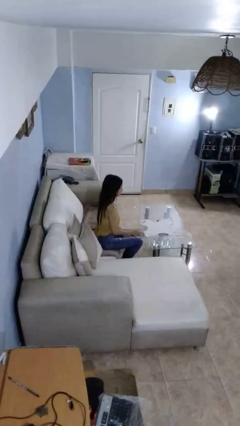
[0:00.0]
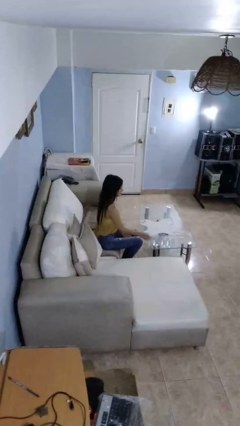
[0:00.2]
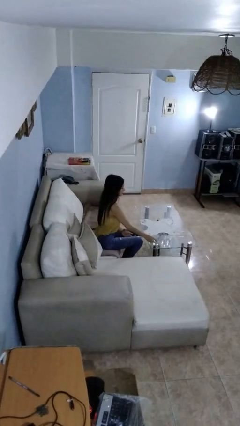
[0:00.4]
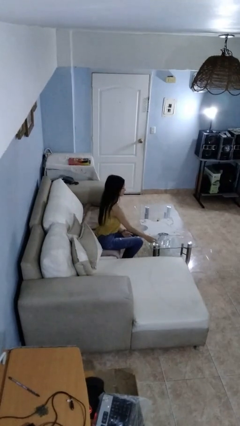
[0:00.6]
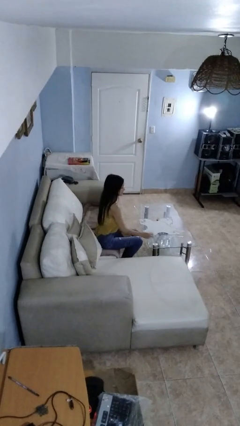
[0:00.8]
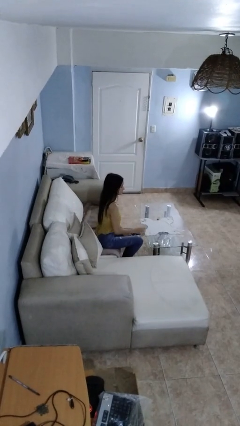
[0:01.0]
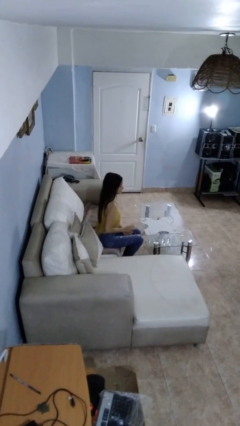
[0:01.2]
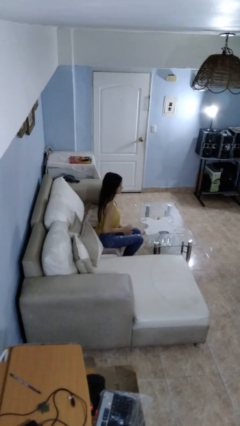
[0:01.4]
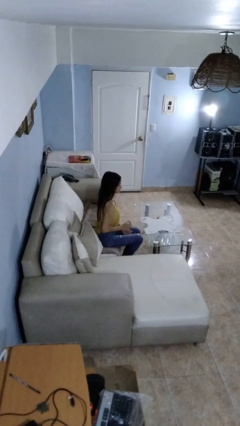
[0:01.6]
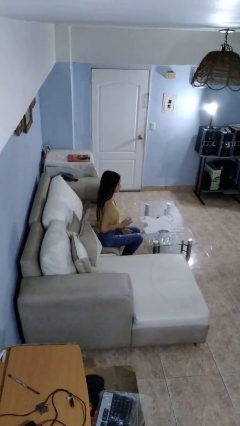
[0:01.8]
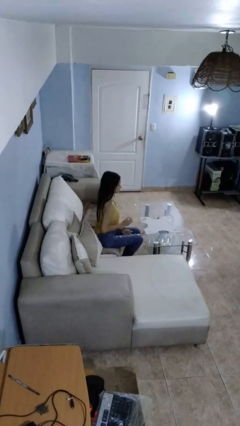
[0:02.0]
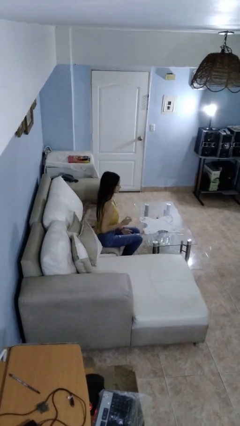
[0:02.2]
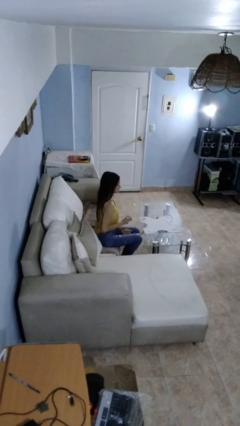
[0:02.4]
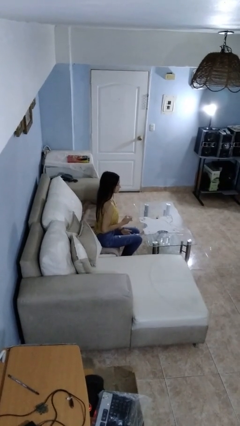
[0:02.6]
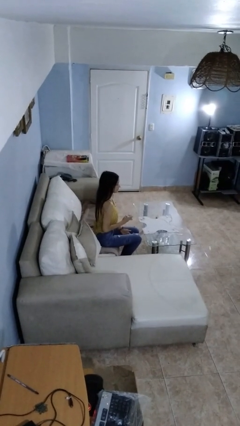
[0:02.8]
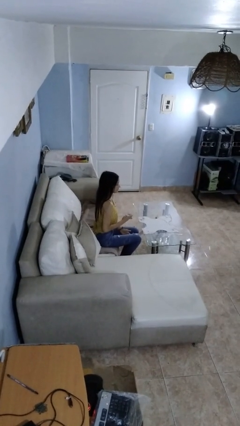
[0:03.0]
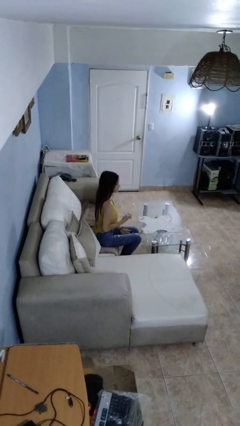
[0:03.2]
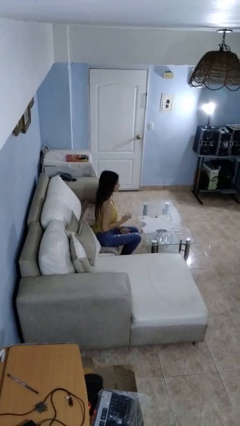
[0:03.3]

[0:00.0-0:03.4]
person picks up object from table

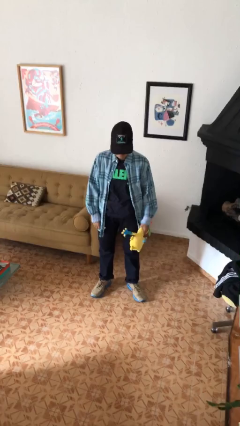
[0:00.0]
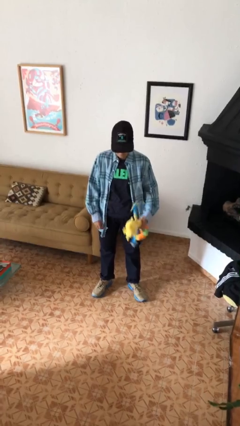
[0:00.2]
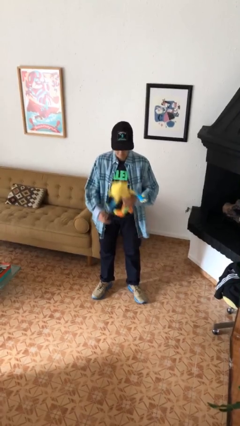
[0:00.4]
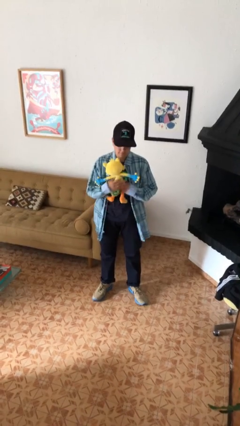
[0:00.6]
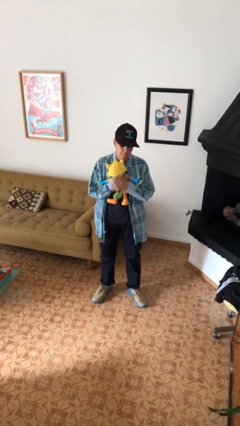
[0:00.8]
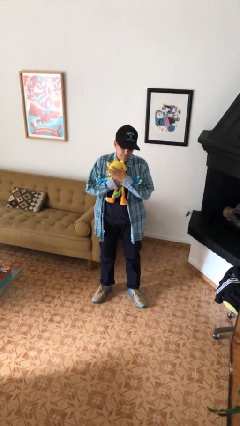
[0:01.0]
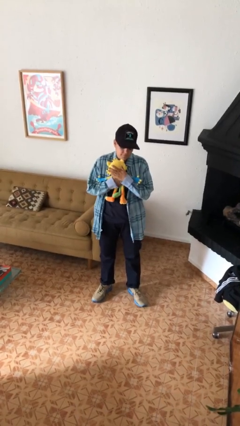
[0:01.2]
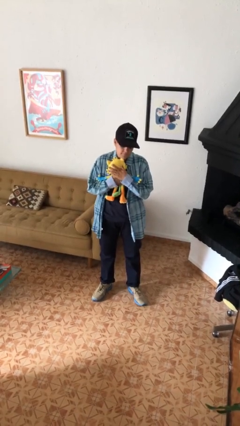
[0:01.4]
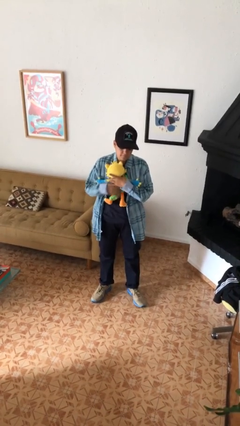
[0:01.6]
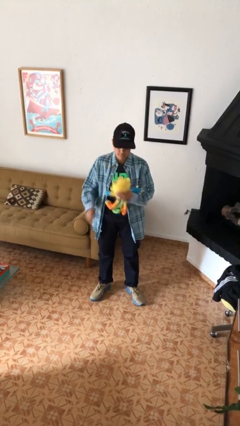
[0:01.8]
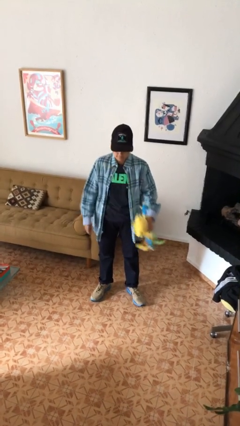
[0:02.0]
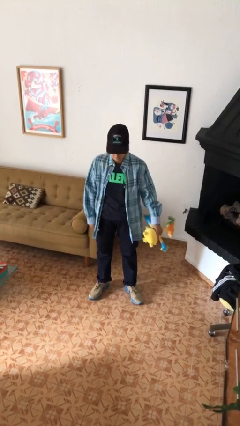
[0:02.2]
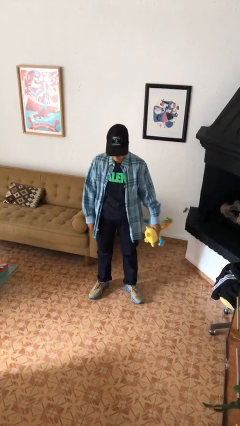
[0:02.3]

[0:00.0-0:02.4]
person hugs stuffed animal

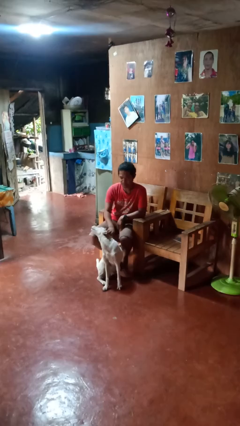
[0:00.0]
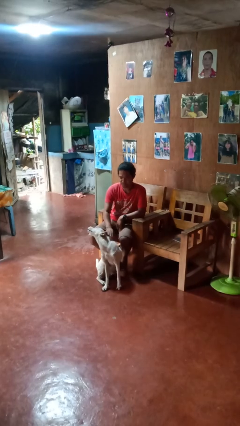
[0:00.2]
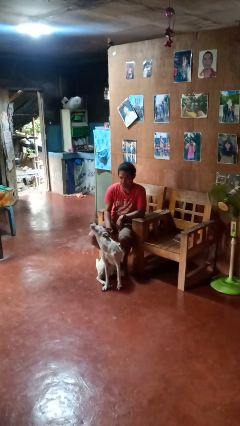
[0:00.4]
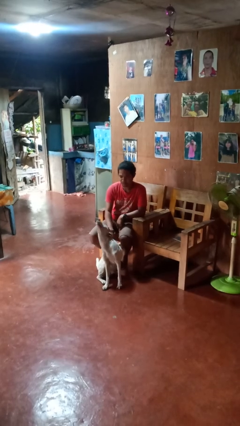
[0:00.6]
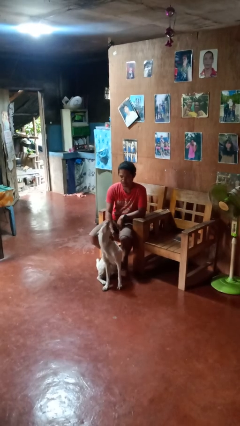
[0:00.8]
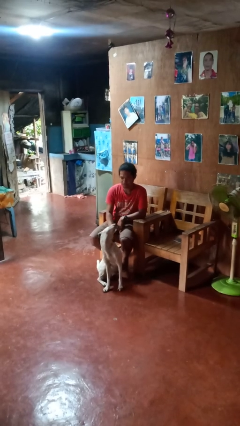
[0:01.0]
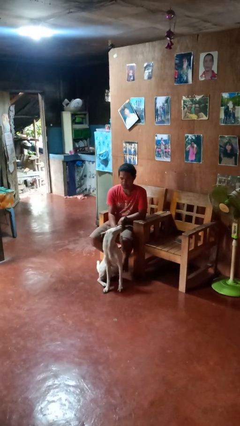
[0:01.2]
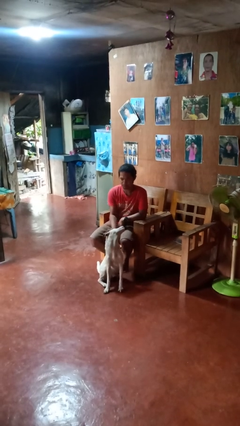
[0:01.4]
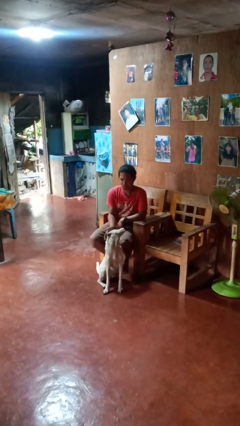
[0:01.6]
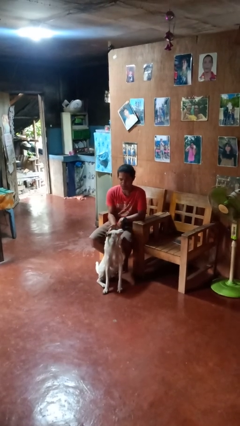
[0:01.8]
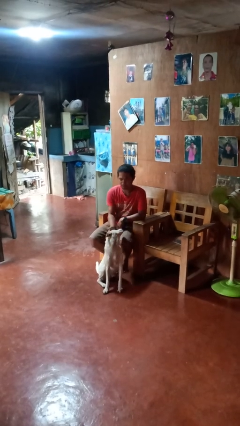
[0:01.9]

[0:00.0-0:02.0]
person pets dog

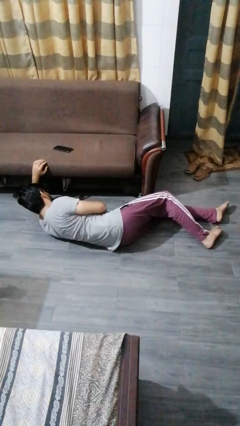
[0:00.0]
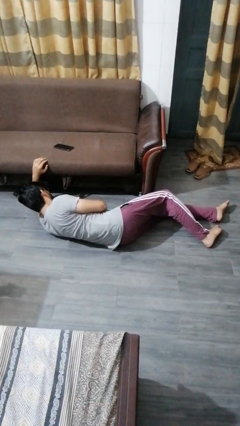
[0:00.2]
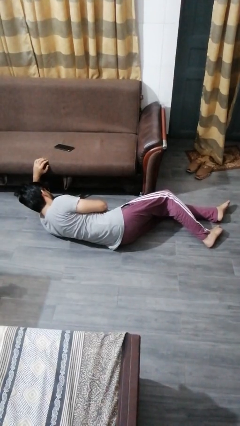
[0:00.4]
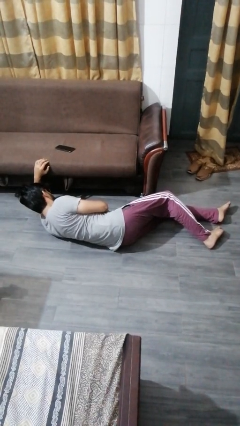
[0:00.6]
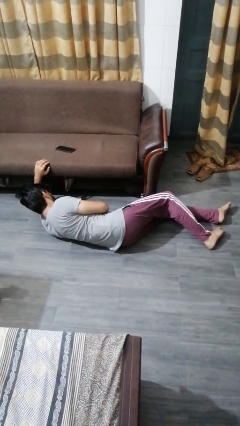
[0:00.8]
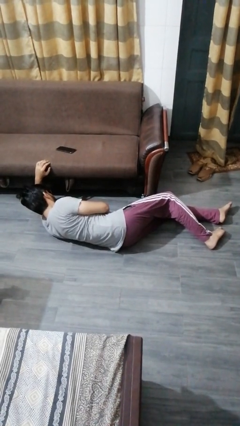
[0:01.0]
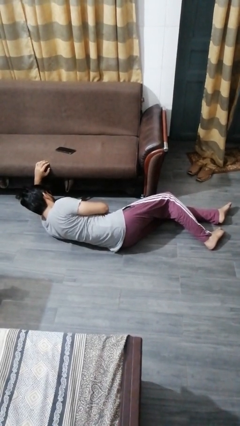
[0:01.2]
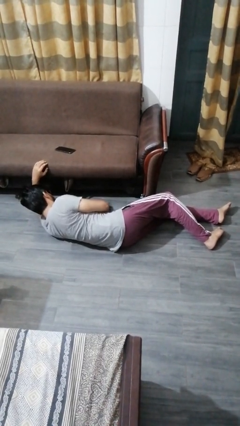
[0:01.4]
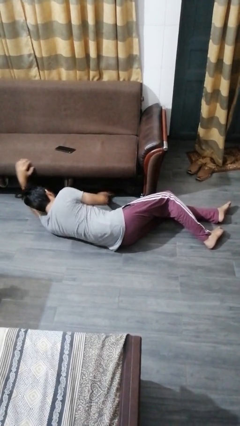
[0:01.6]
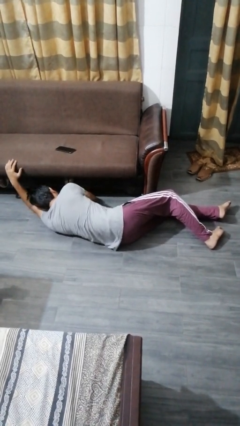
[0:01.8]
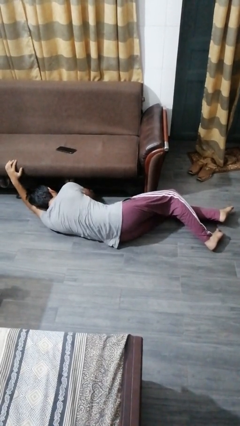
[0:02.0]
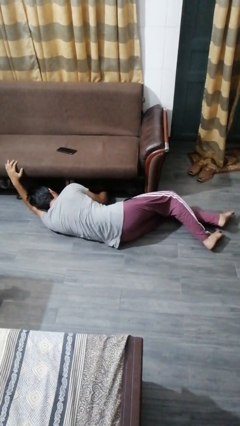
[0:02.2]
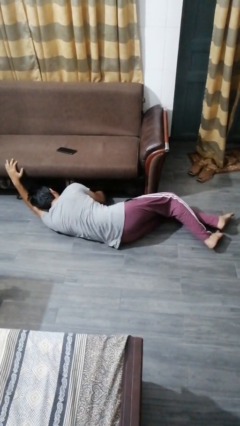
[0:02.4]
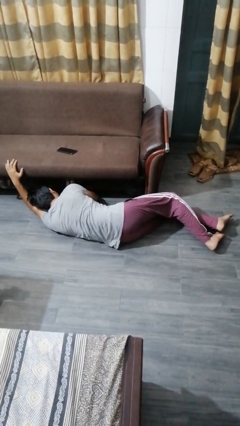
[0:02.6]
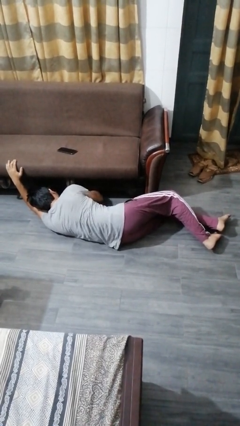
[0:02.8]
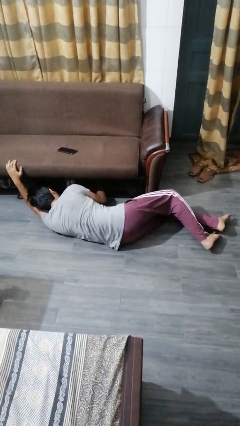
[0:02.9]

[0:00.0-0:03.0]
person searches under couch

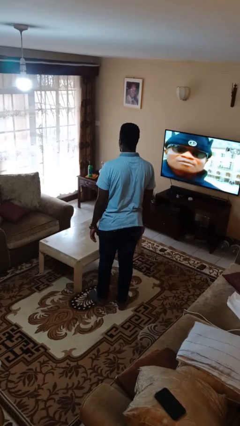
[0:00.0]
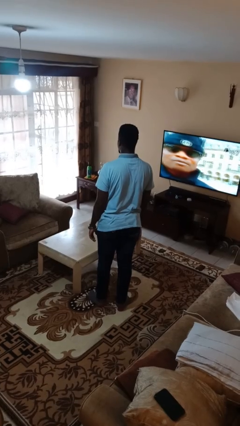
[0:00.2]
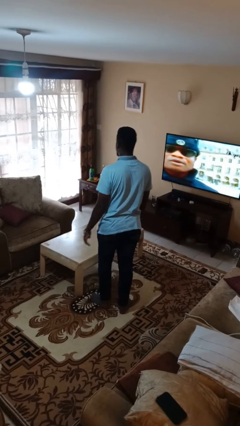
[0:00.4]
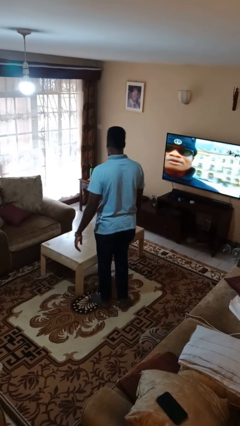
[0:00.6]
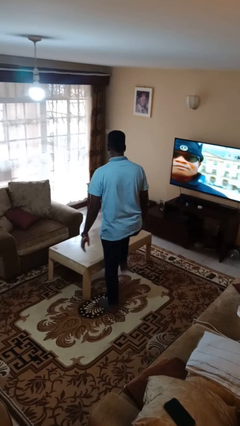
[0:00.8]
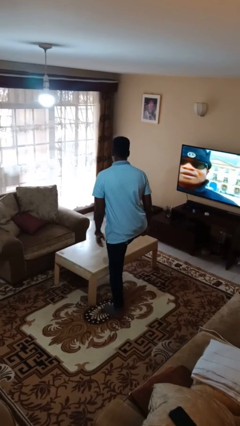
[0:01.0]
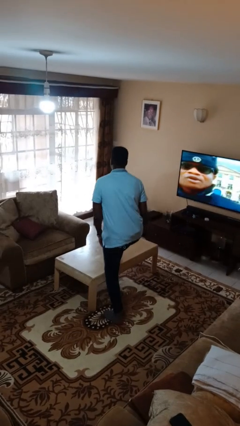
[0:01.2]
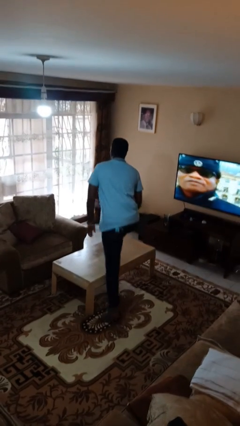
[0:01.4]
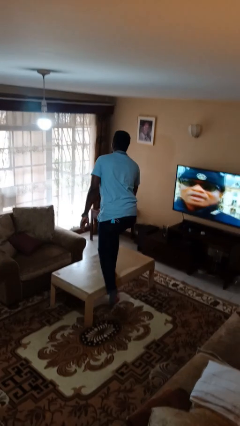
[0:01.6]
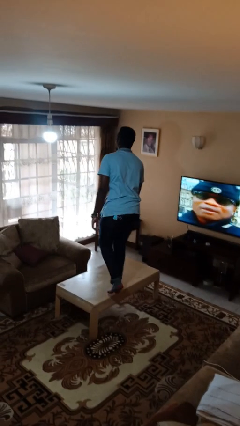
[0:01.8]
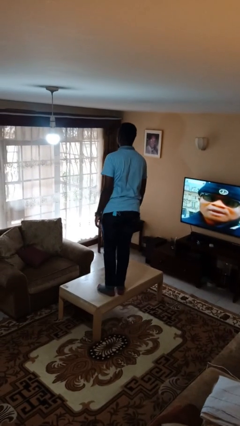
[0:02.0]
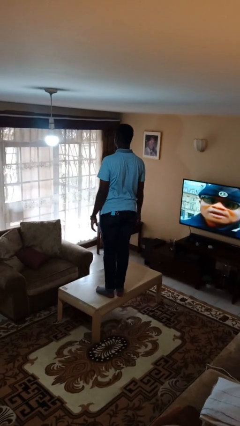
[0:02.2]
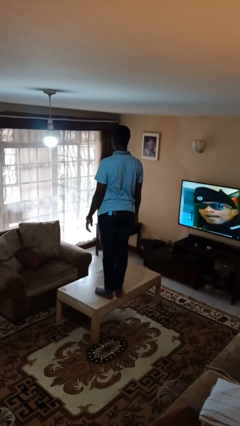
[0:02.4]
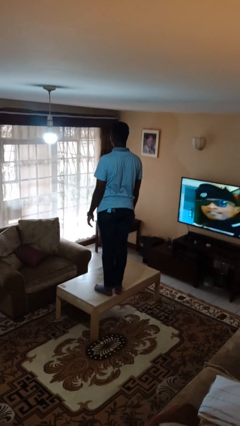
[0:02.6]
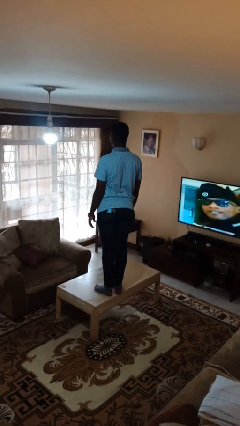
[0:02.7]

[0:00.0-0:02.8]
person climbs on table

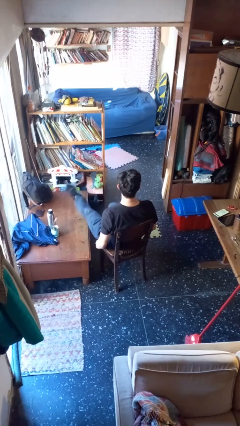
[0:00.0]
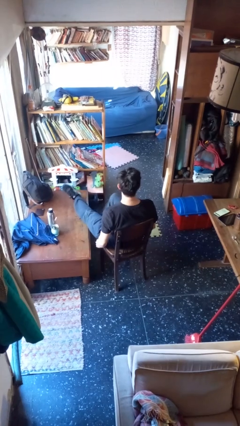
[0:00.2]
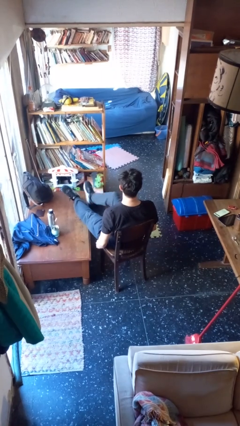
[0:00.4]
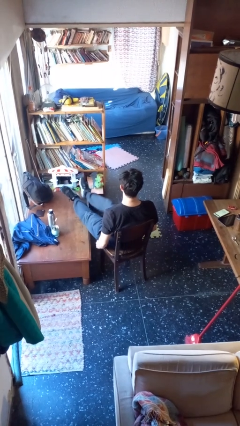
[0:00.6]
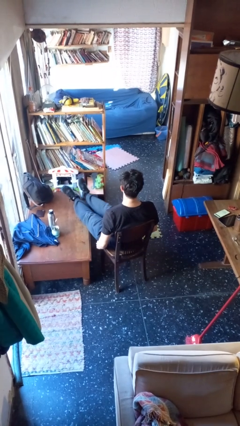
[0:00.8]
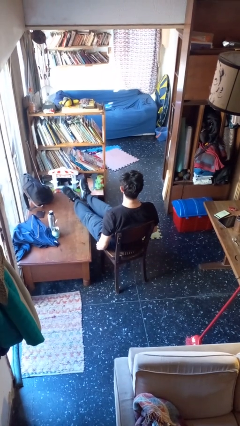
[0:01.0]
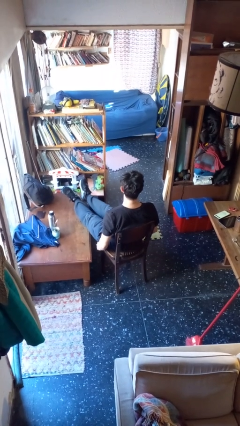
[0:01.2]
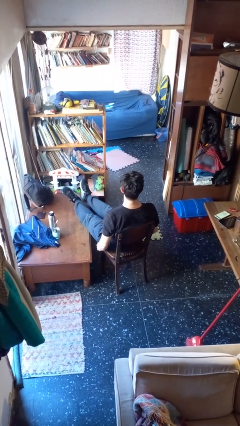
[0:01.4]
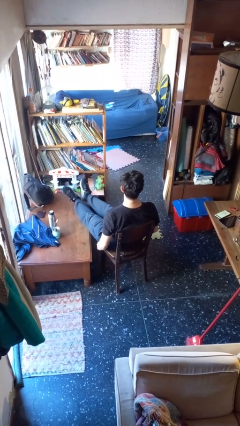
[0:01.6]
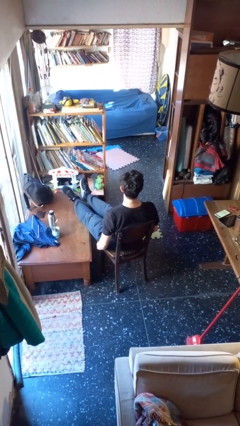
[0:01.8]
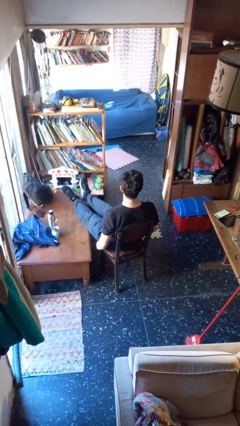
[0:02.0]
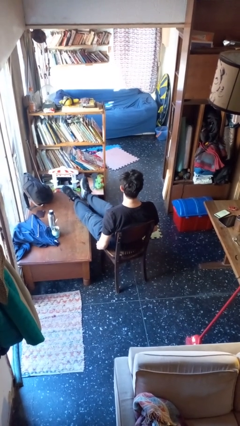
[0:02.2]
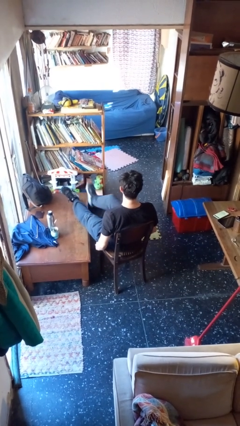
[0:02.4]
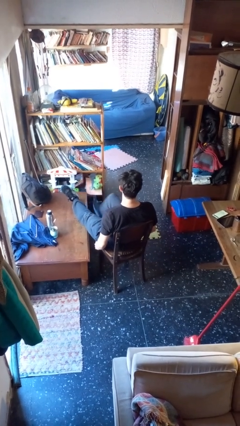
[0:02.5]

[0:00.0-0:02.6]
person puts feet up

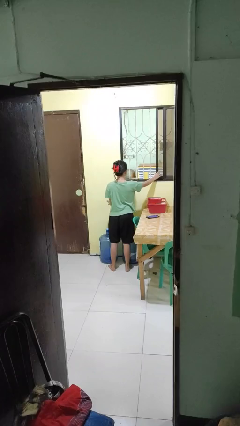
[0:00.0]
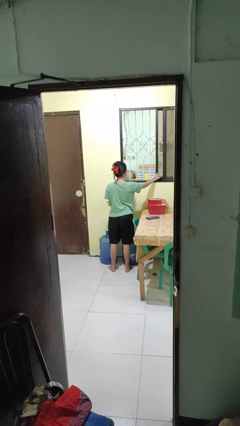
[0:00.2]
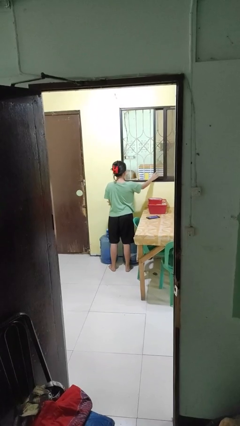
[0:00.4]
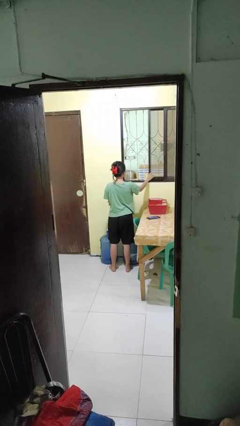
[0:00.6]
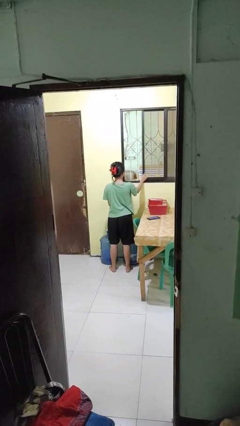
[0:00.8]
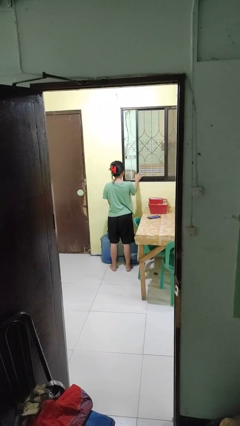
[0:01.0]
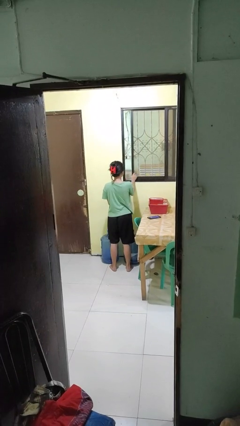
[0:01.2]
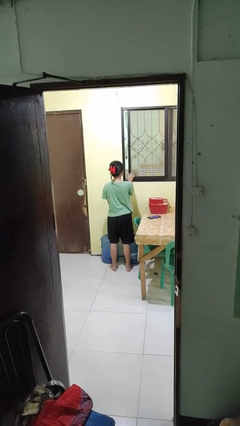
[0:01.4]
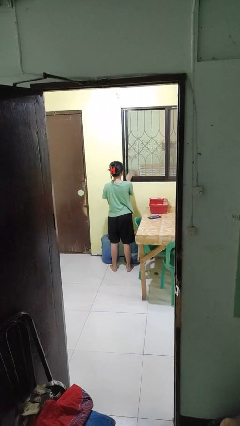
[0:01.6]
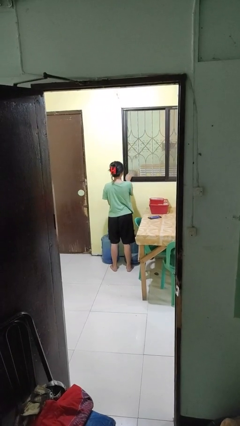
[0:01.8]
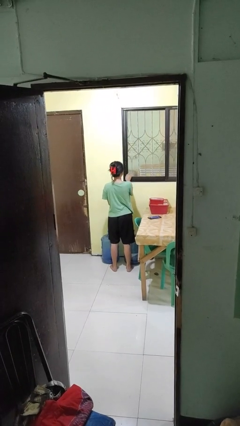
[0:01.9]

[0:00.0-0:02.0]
person closes home window
